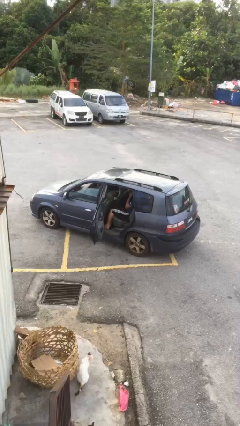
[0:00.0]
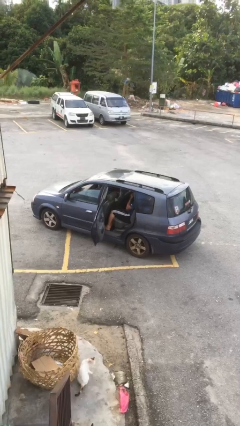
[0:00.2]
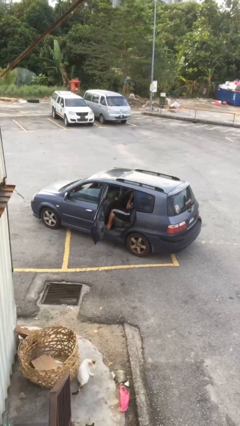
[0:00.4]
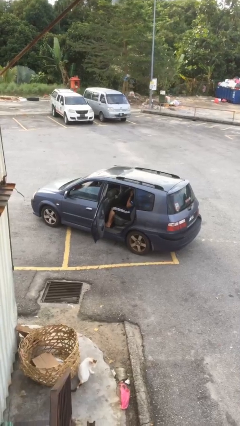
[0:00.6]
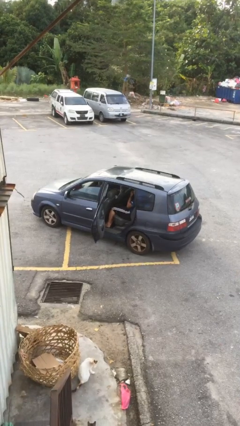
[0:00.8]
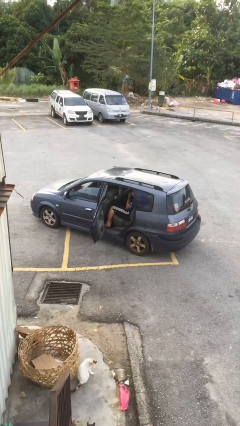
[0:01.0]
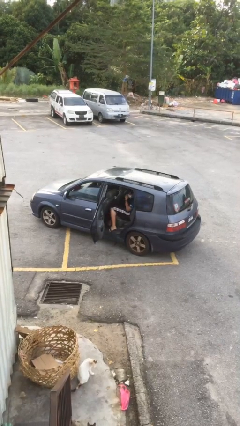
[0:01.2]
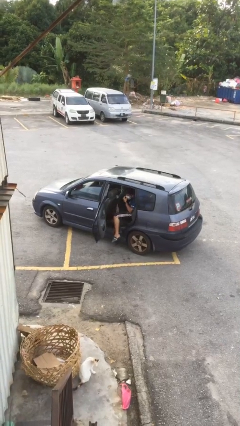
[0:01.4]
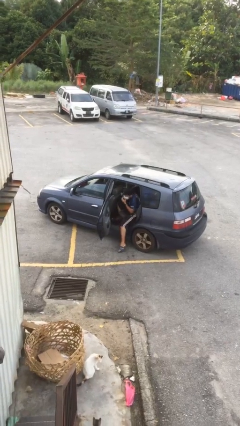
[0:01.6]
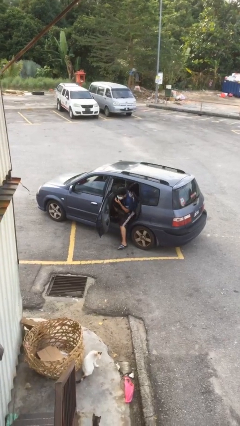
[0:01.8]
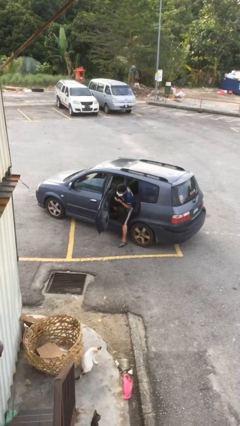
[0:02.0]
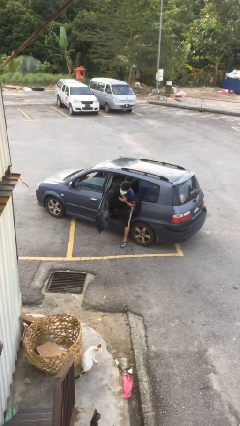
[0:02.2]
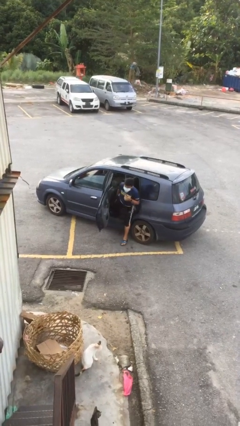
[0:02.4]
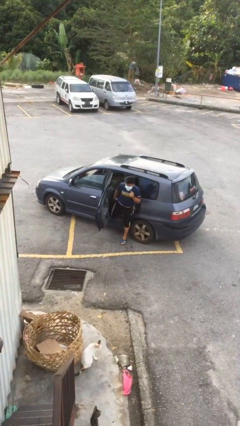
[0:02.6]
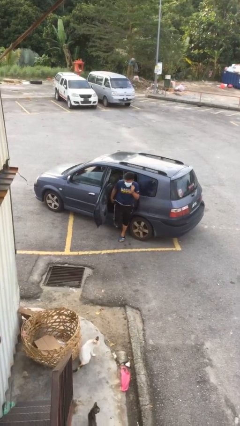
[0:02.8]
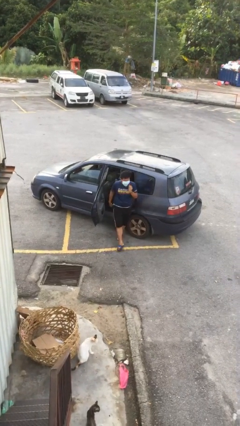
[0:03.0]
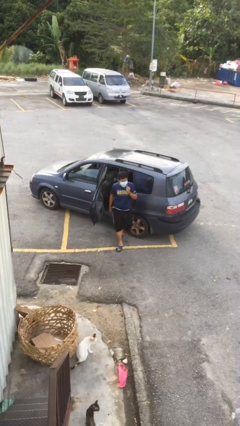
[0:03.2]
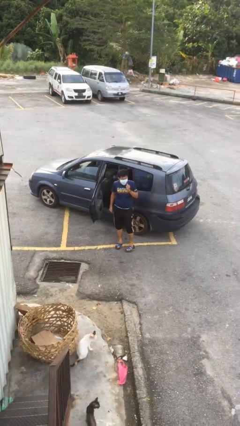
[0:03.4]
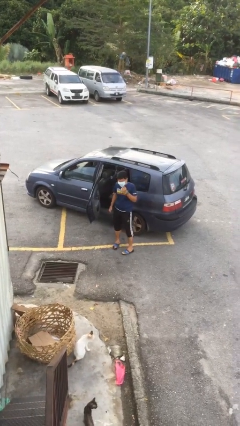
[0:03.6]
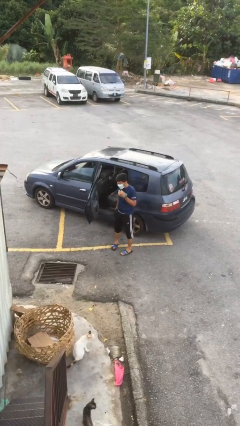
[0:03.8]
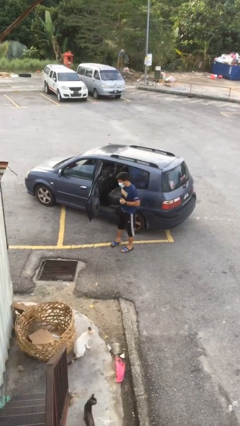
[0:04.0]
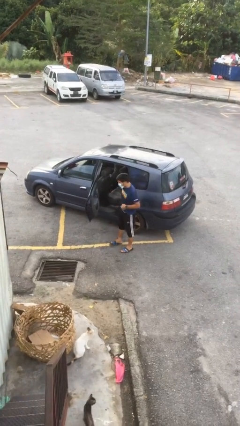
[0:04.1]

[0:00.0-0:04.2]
person exits car

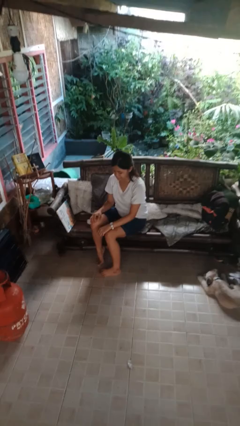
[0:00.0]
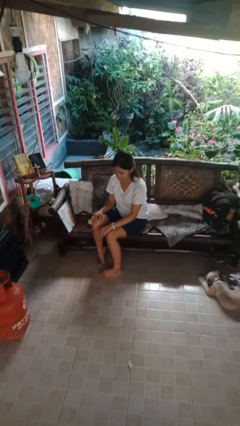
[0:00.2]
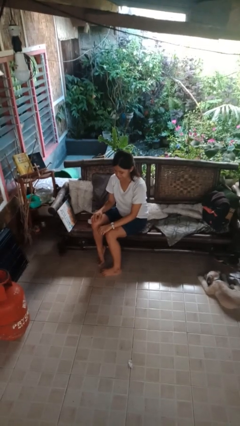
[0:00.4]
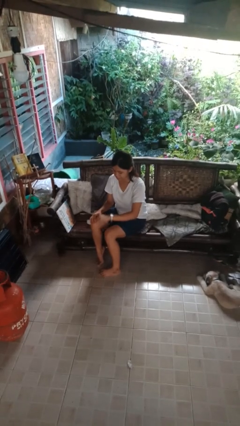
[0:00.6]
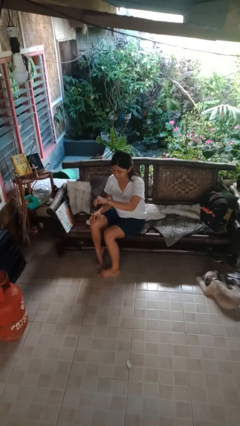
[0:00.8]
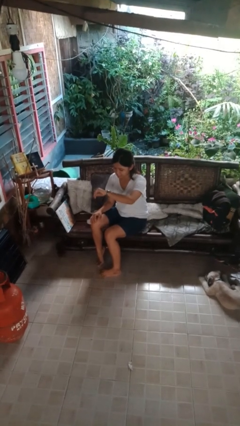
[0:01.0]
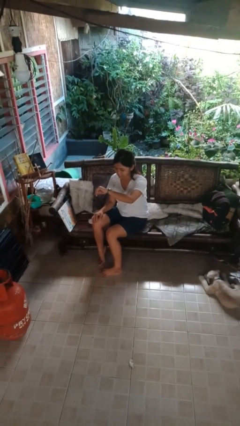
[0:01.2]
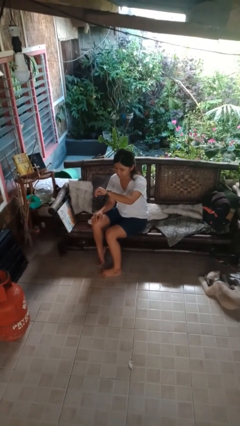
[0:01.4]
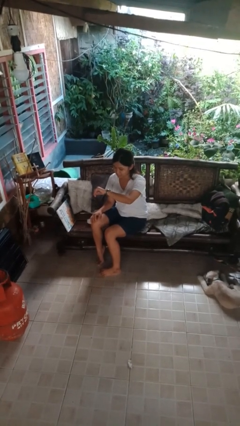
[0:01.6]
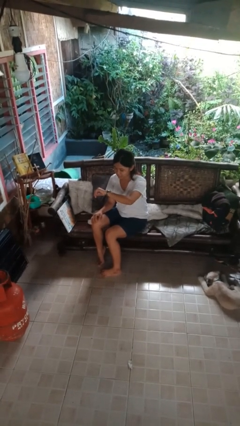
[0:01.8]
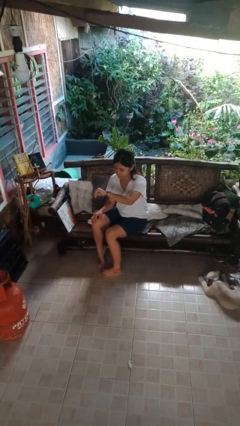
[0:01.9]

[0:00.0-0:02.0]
person looks at wristwatch

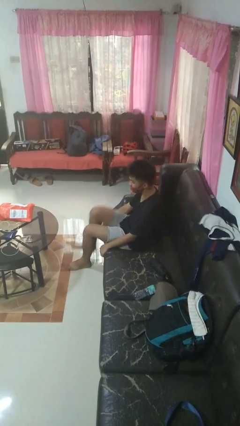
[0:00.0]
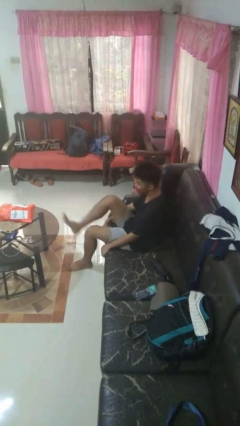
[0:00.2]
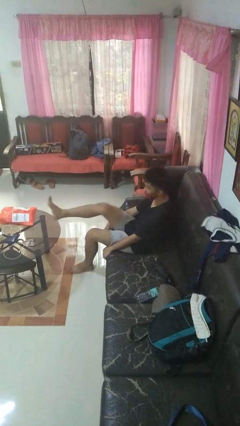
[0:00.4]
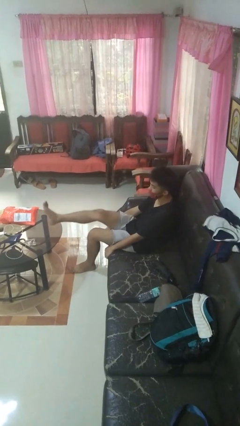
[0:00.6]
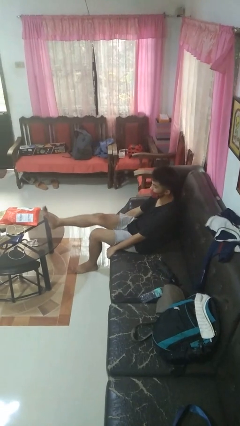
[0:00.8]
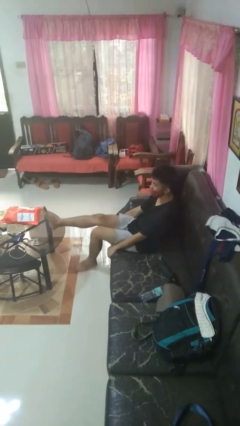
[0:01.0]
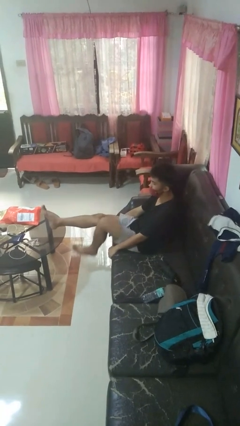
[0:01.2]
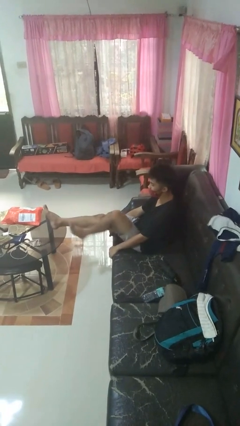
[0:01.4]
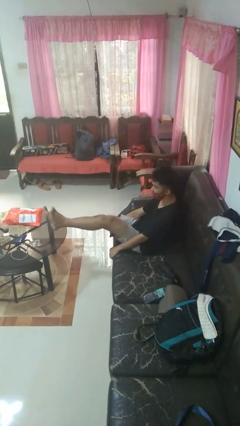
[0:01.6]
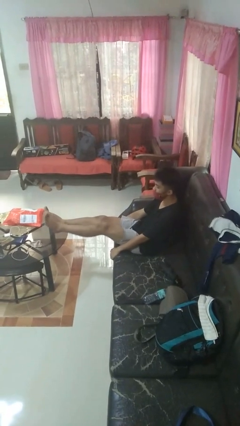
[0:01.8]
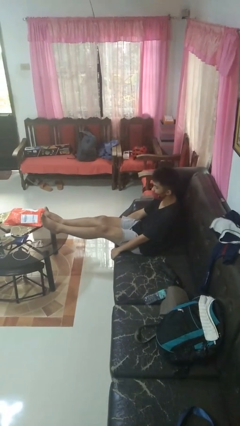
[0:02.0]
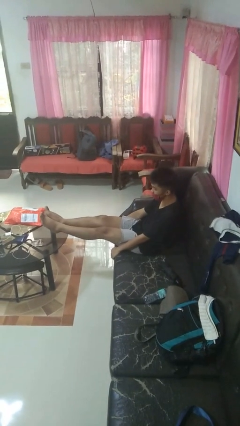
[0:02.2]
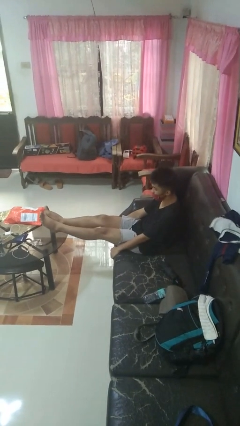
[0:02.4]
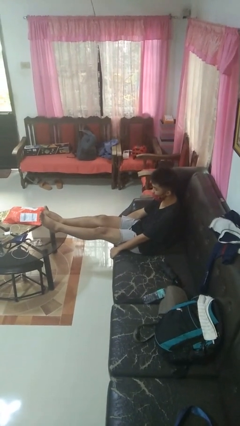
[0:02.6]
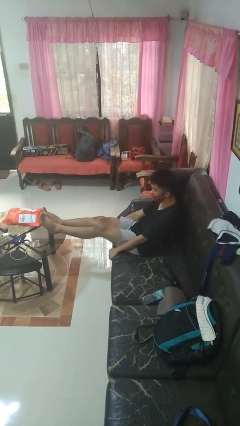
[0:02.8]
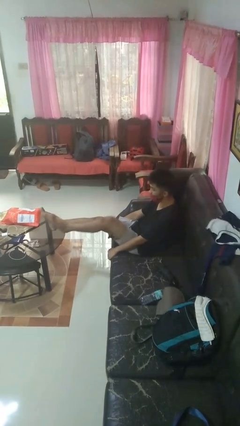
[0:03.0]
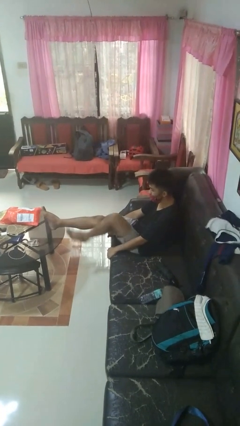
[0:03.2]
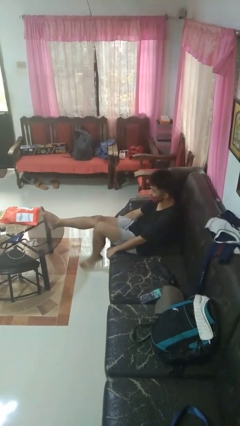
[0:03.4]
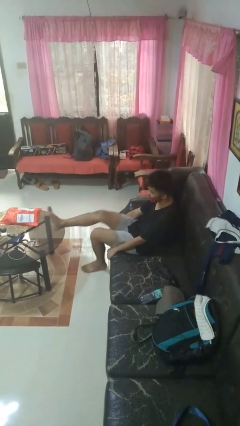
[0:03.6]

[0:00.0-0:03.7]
person puts feet up

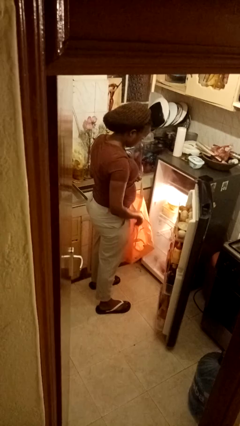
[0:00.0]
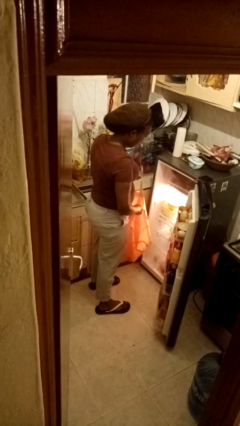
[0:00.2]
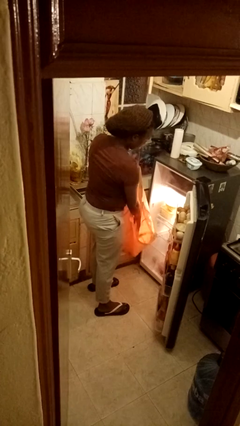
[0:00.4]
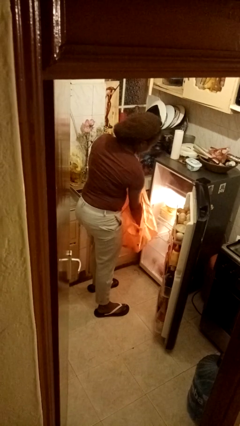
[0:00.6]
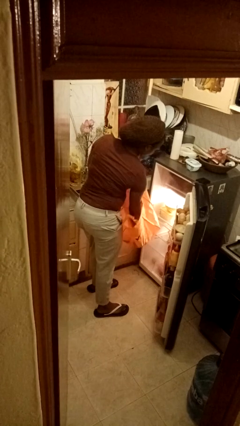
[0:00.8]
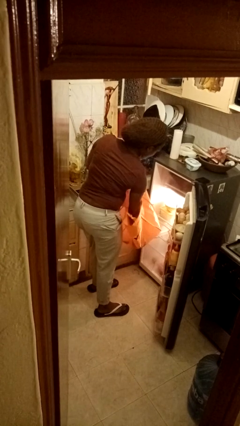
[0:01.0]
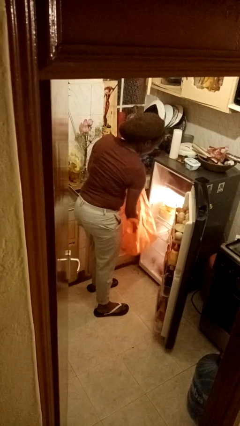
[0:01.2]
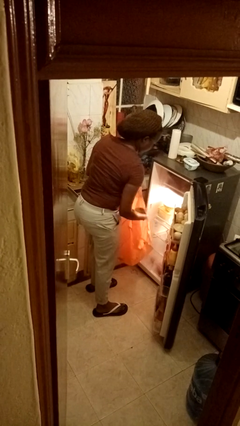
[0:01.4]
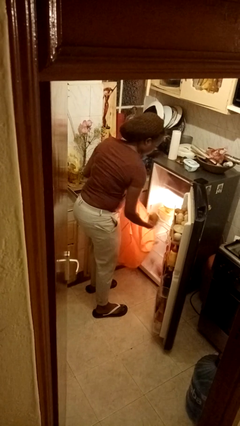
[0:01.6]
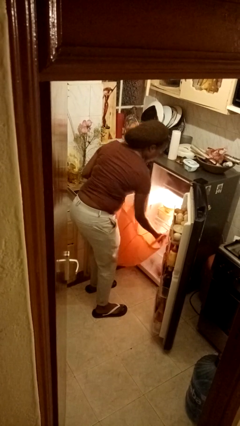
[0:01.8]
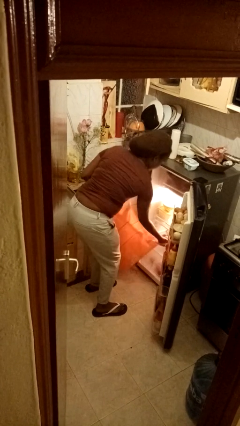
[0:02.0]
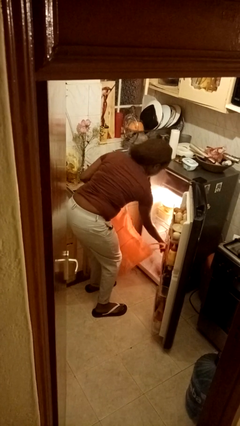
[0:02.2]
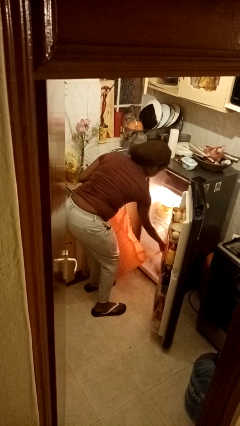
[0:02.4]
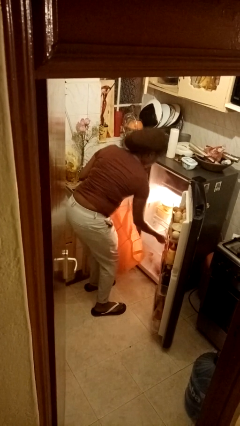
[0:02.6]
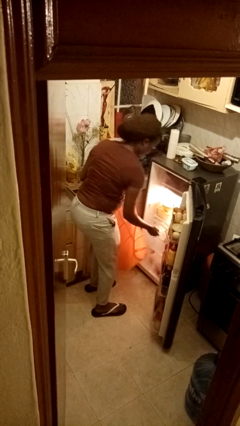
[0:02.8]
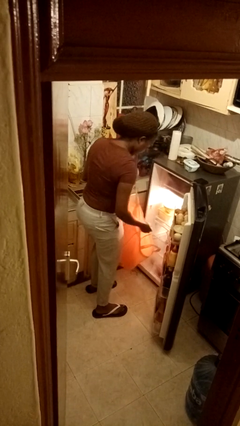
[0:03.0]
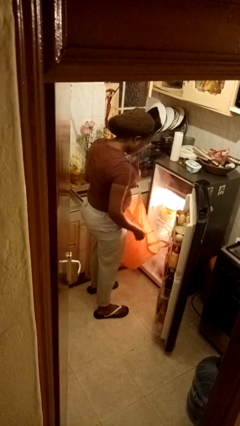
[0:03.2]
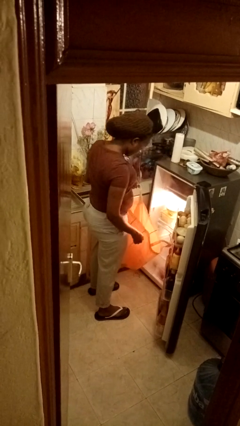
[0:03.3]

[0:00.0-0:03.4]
person loads groceries into refrigerator

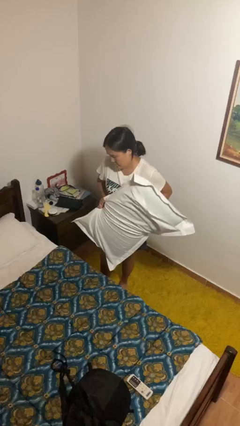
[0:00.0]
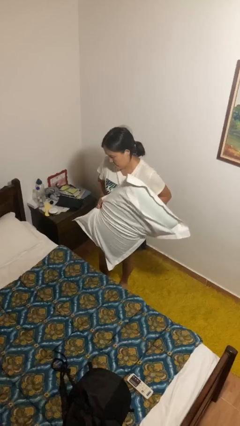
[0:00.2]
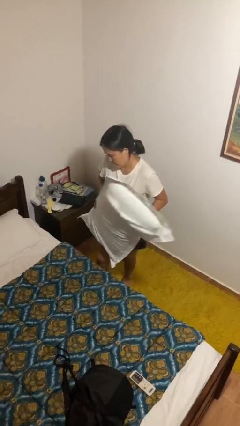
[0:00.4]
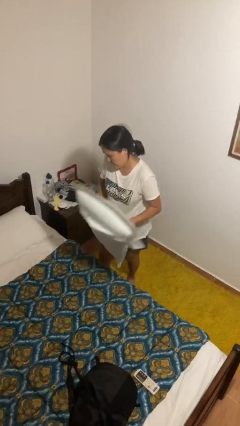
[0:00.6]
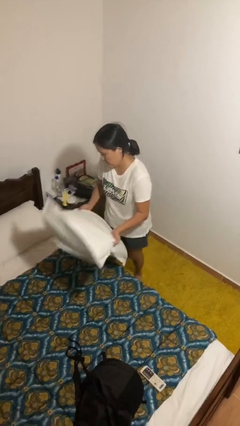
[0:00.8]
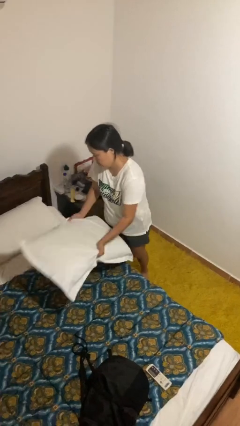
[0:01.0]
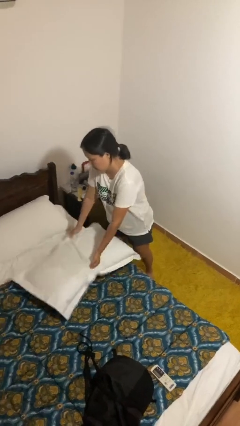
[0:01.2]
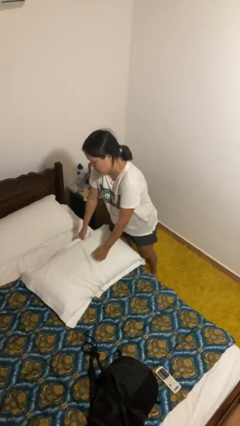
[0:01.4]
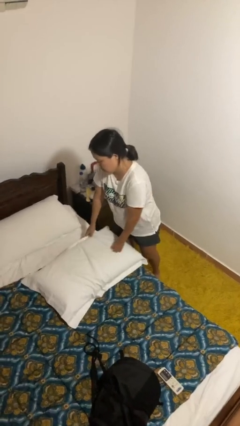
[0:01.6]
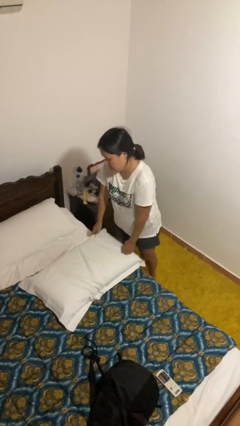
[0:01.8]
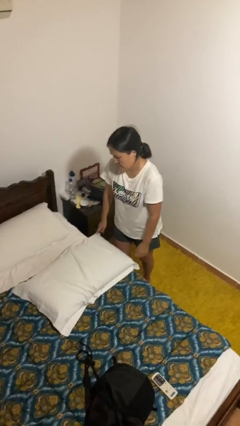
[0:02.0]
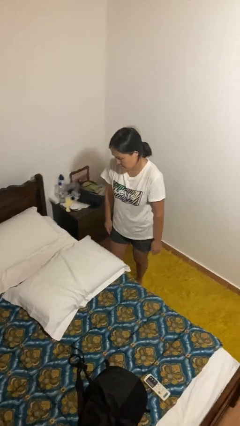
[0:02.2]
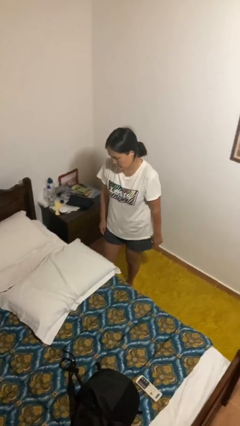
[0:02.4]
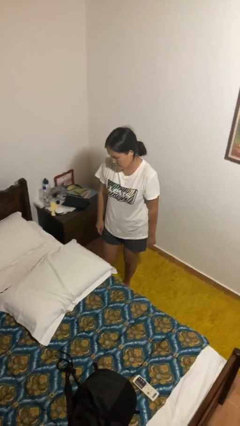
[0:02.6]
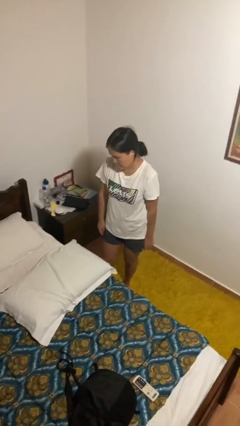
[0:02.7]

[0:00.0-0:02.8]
person puts down object on bed

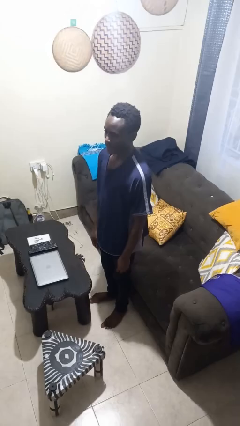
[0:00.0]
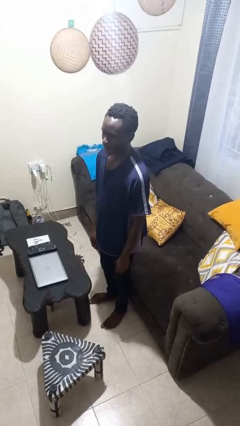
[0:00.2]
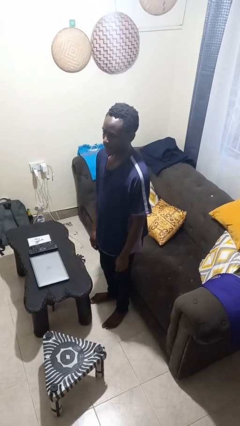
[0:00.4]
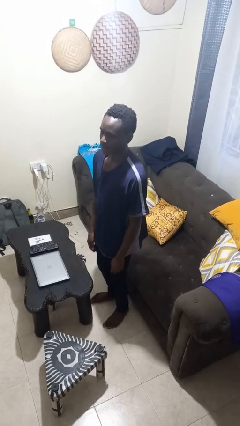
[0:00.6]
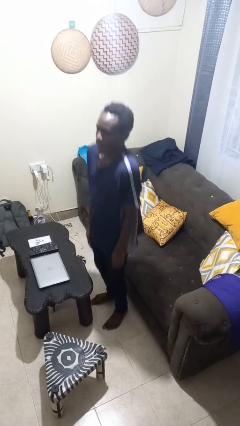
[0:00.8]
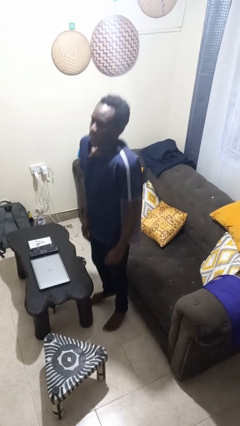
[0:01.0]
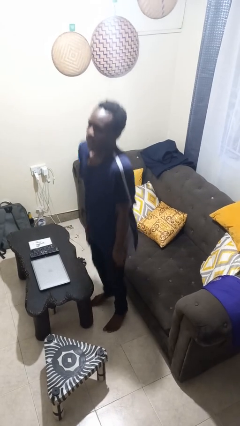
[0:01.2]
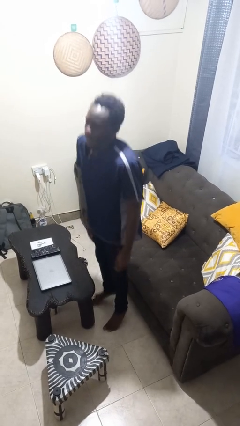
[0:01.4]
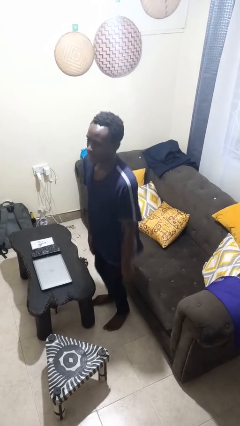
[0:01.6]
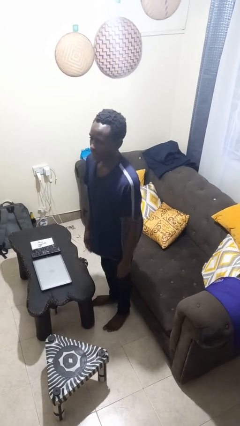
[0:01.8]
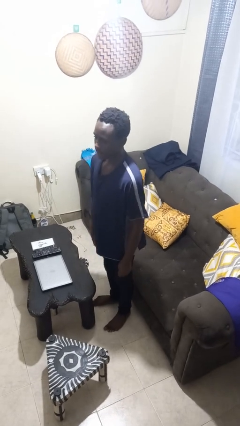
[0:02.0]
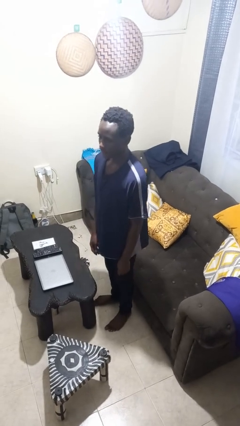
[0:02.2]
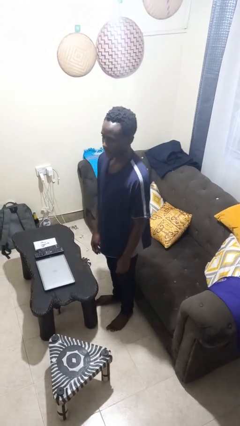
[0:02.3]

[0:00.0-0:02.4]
person jumps
